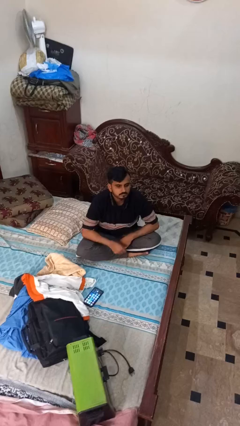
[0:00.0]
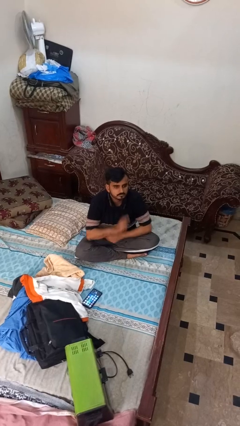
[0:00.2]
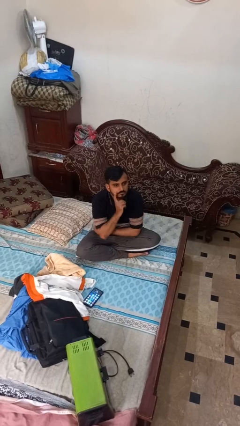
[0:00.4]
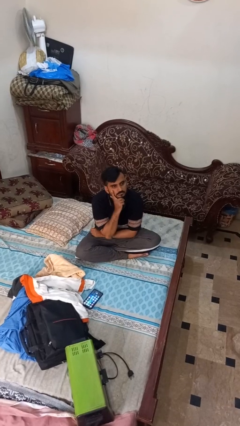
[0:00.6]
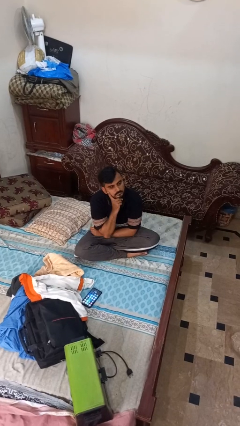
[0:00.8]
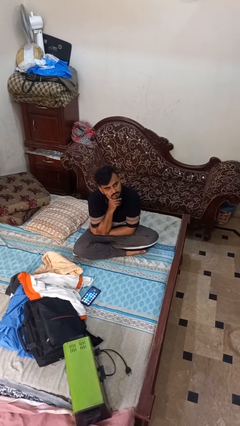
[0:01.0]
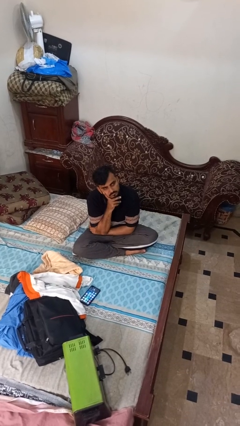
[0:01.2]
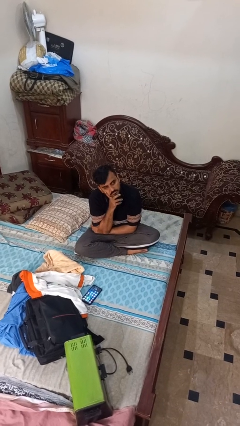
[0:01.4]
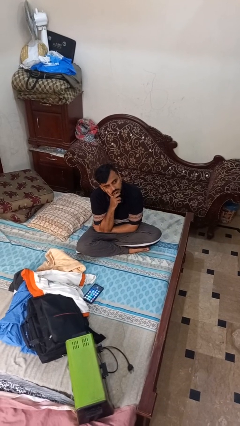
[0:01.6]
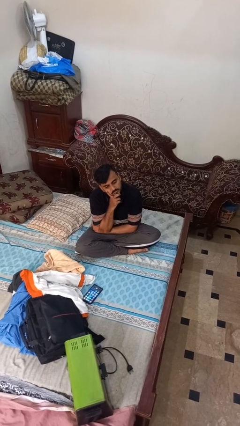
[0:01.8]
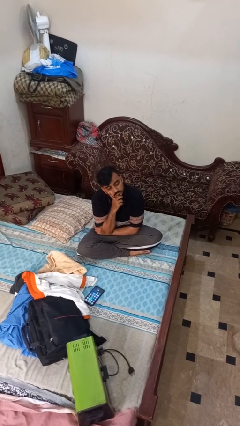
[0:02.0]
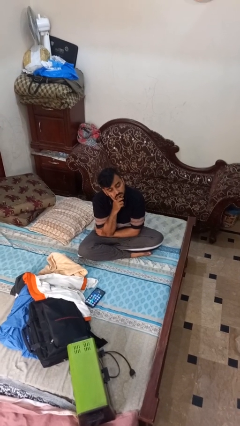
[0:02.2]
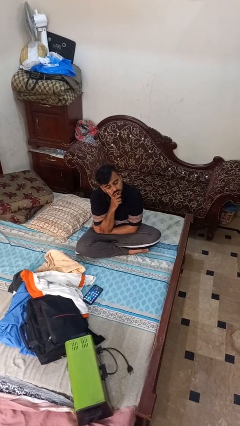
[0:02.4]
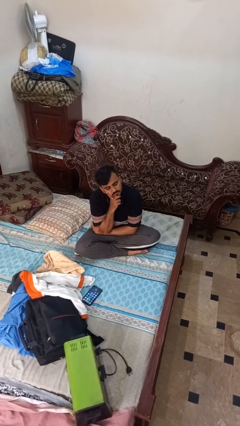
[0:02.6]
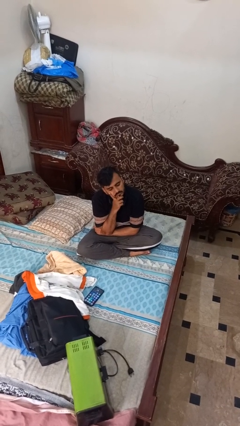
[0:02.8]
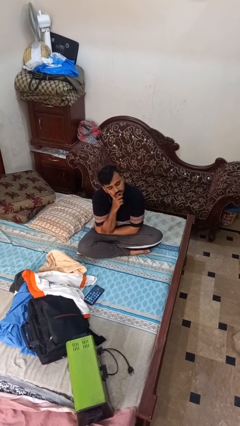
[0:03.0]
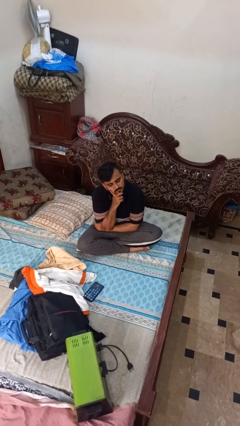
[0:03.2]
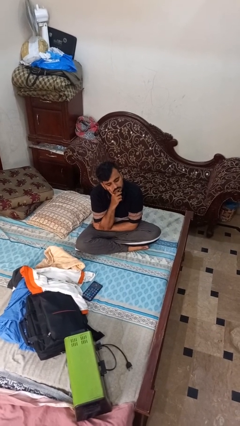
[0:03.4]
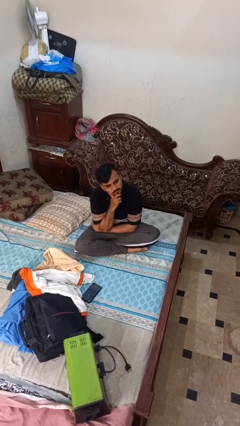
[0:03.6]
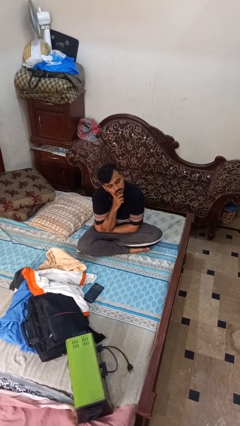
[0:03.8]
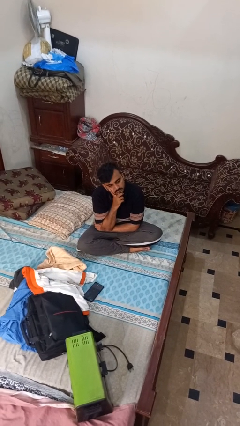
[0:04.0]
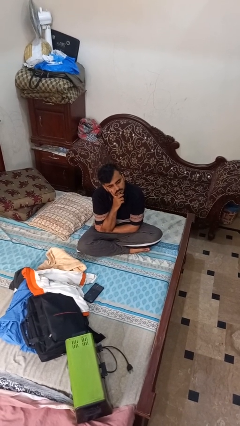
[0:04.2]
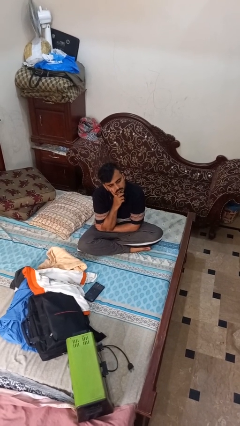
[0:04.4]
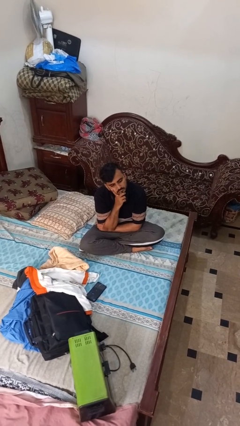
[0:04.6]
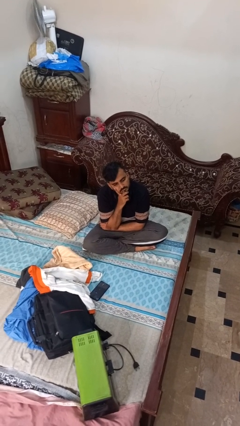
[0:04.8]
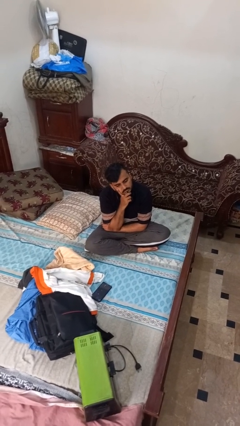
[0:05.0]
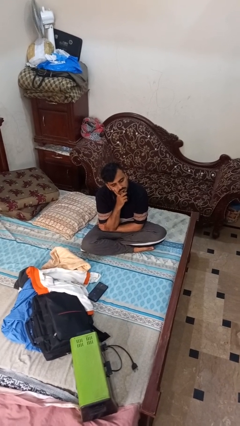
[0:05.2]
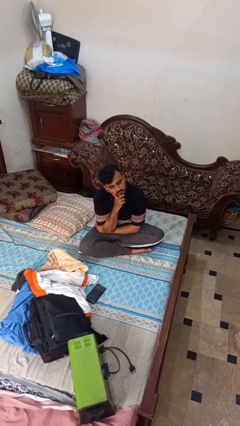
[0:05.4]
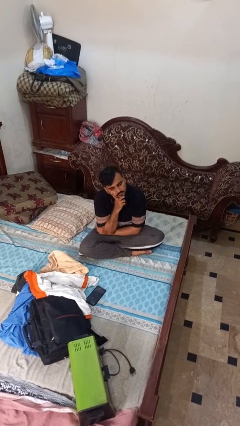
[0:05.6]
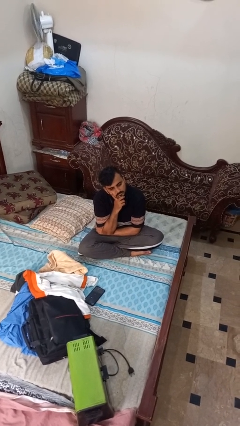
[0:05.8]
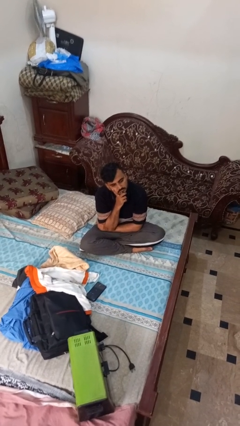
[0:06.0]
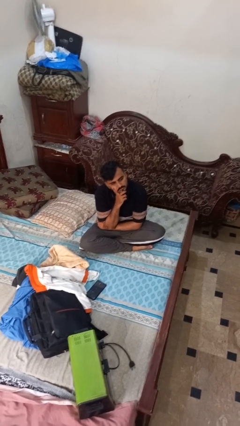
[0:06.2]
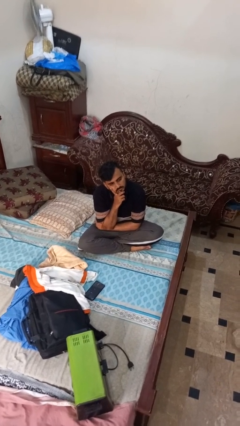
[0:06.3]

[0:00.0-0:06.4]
person strokes chin

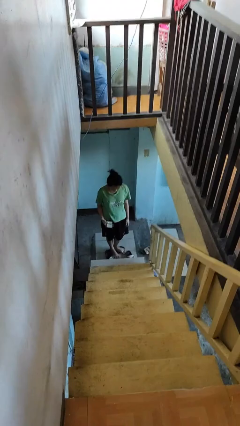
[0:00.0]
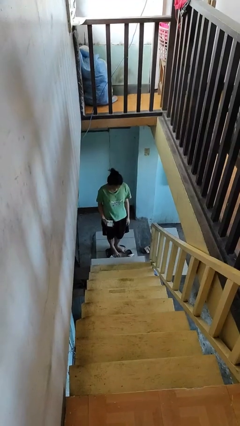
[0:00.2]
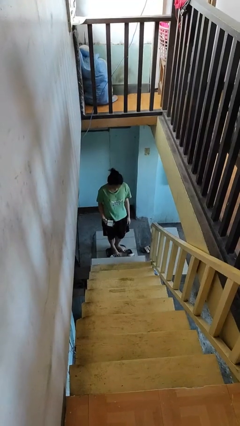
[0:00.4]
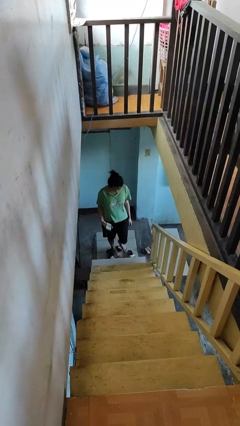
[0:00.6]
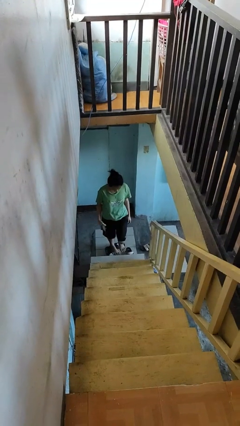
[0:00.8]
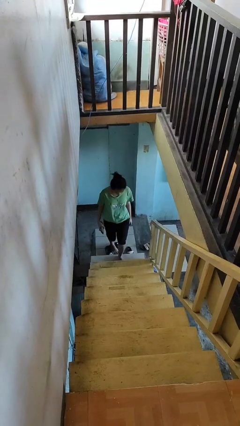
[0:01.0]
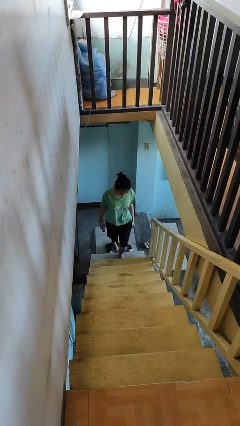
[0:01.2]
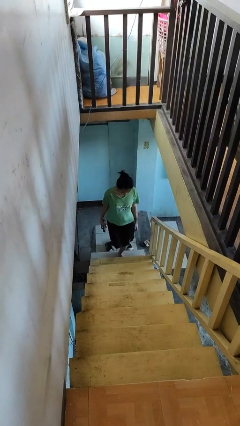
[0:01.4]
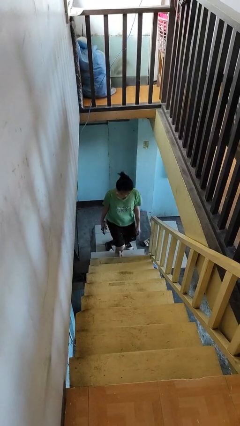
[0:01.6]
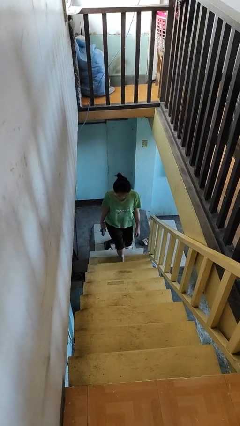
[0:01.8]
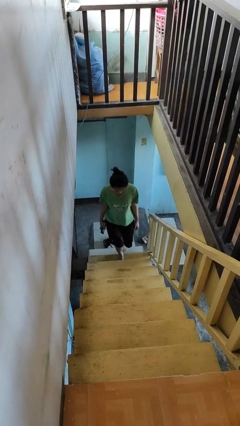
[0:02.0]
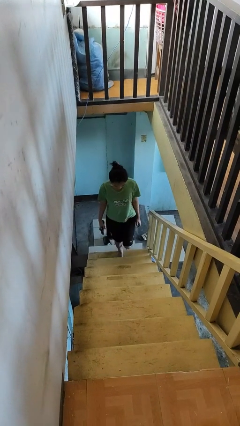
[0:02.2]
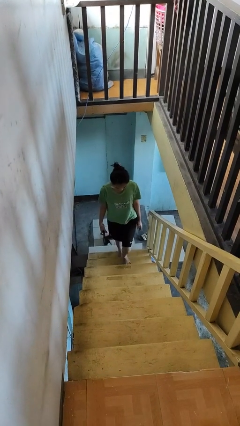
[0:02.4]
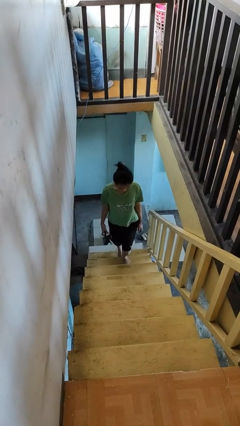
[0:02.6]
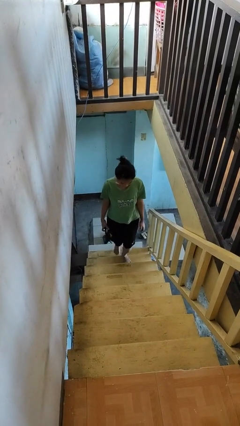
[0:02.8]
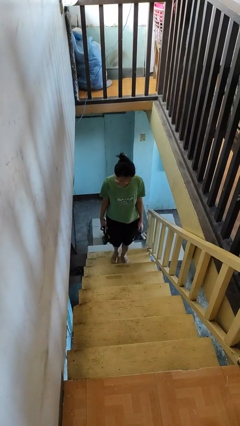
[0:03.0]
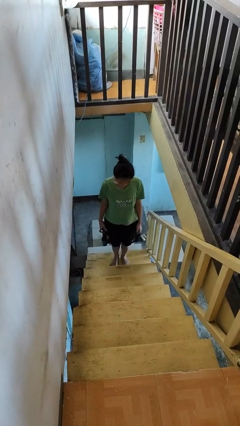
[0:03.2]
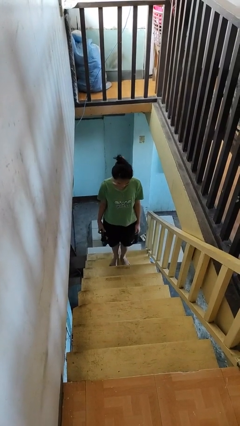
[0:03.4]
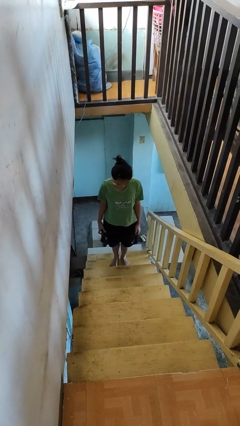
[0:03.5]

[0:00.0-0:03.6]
person climbs up stairs

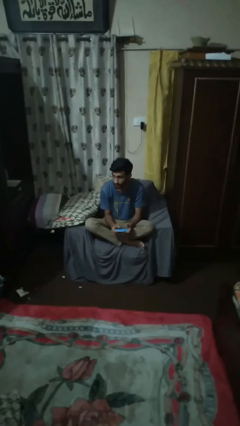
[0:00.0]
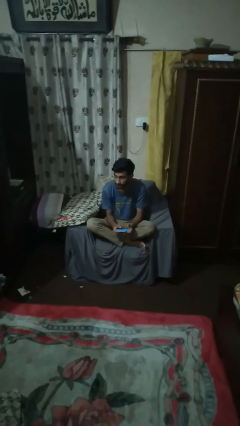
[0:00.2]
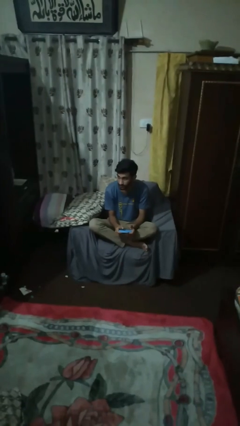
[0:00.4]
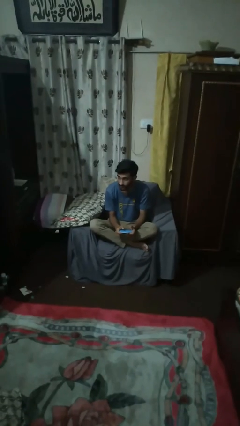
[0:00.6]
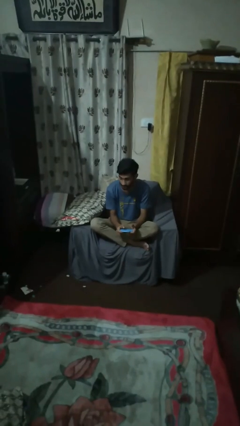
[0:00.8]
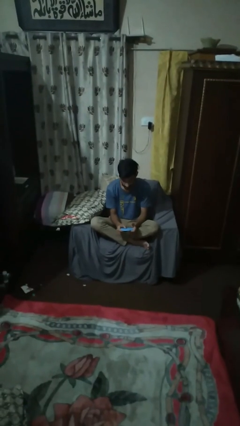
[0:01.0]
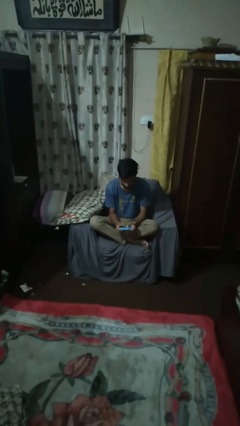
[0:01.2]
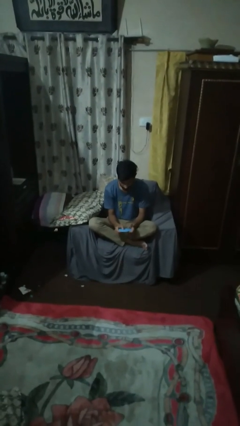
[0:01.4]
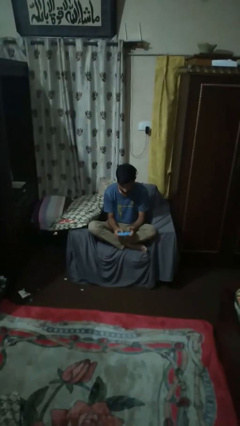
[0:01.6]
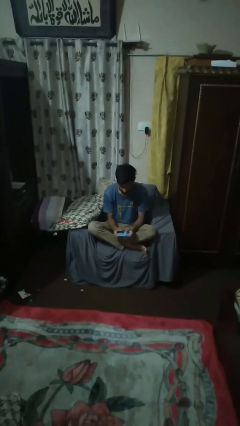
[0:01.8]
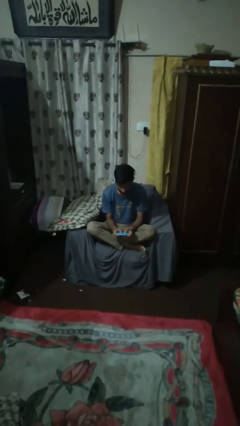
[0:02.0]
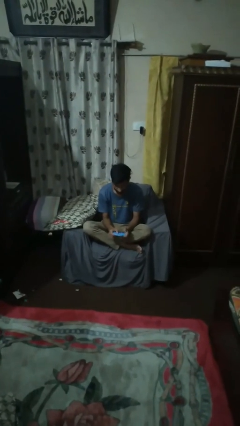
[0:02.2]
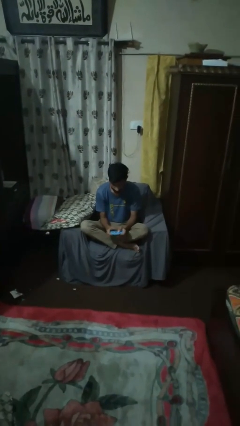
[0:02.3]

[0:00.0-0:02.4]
person interacts with handheld game

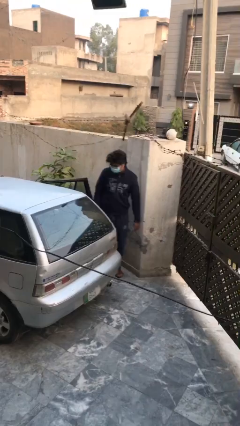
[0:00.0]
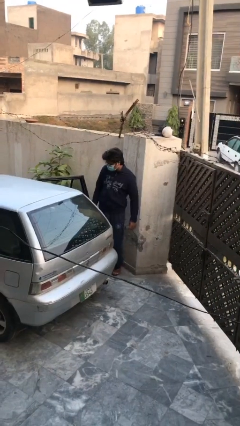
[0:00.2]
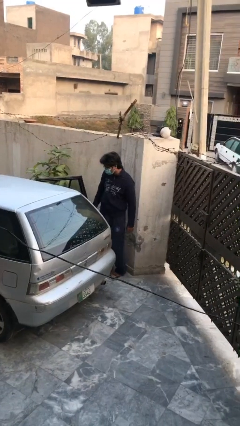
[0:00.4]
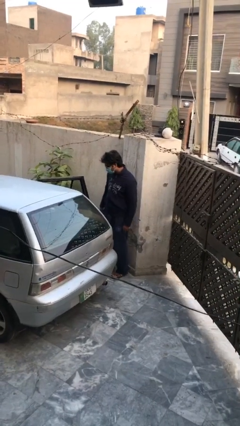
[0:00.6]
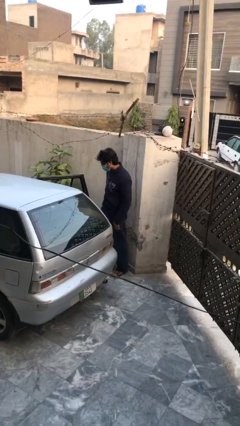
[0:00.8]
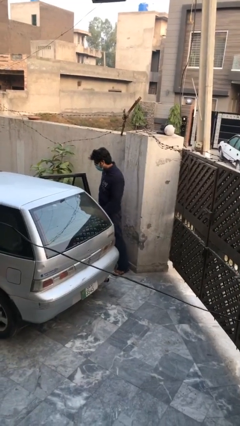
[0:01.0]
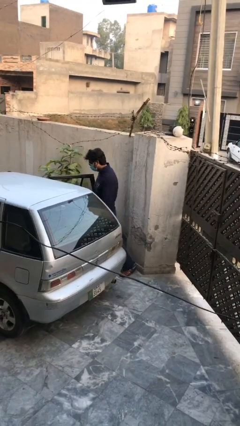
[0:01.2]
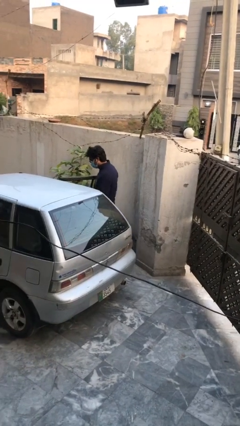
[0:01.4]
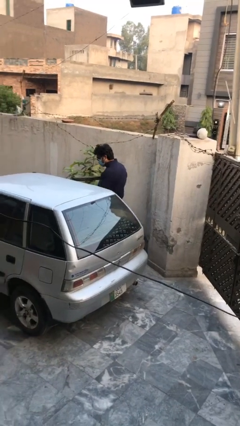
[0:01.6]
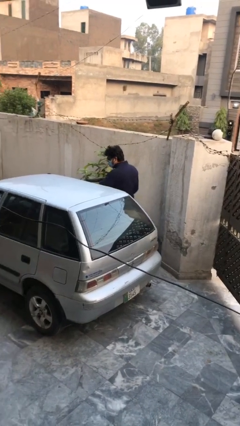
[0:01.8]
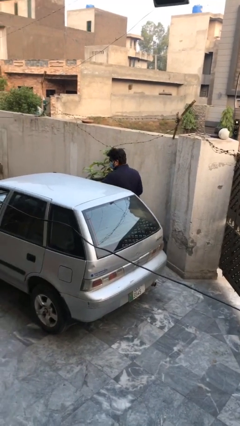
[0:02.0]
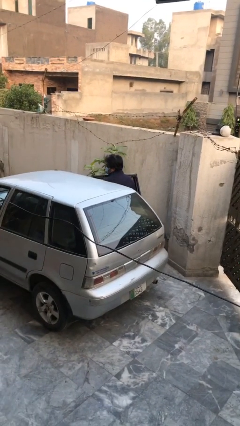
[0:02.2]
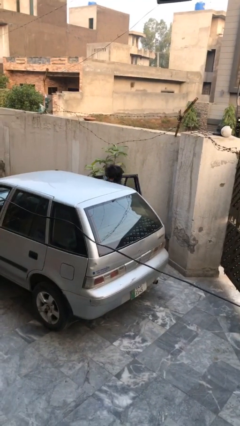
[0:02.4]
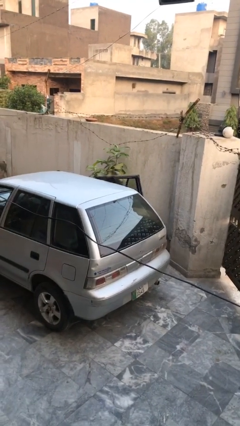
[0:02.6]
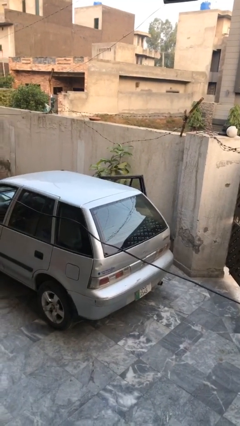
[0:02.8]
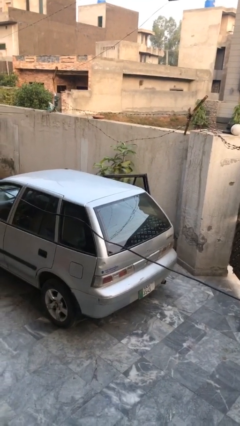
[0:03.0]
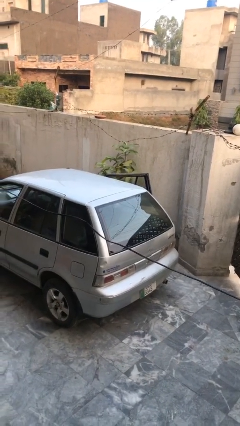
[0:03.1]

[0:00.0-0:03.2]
person enters car

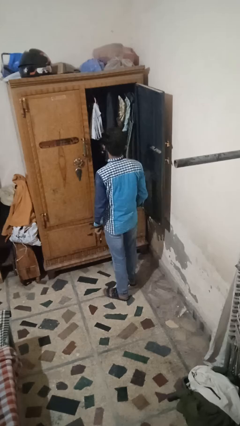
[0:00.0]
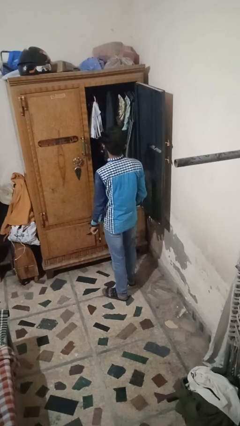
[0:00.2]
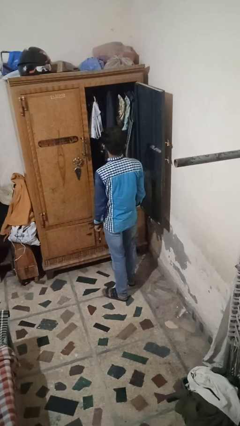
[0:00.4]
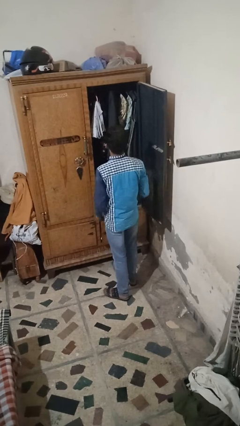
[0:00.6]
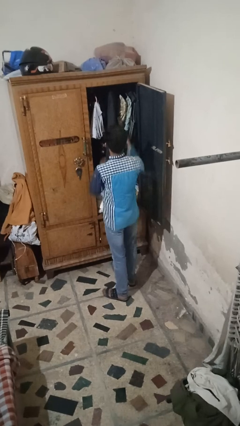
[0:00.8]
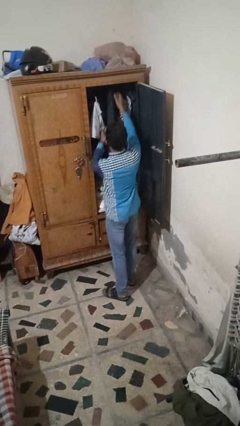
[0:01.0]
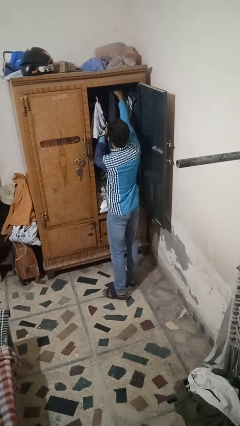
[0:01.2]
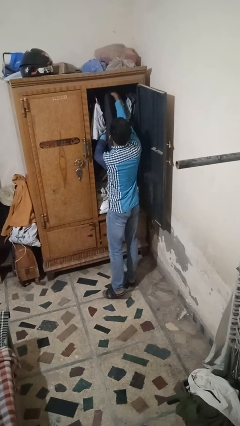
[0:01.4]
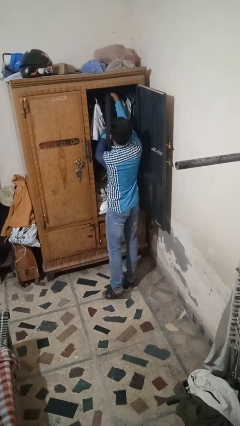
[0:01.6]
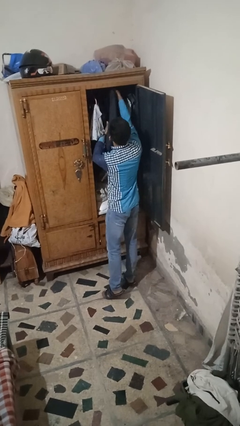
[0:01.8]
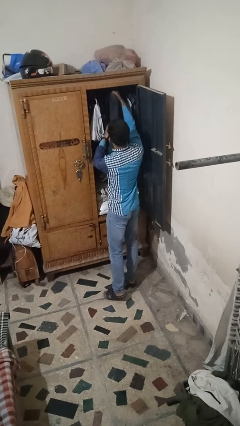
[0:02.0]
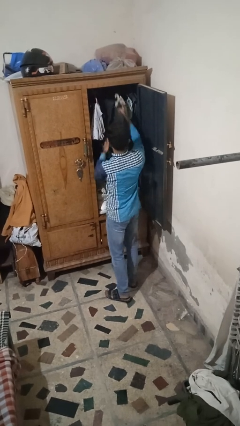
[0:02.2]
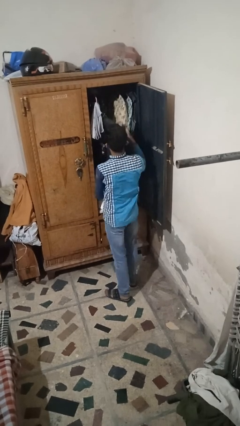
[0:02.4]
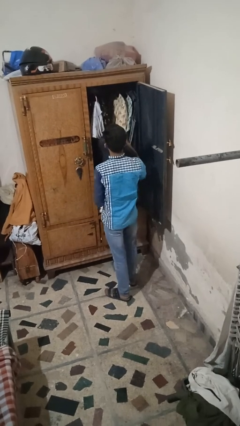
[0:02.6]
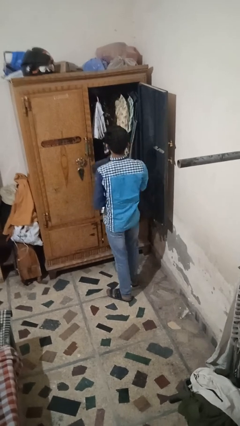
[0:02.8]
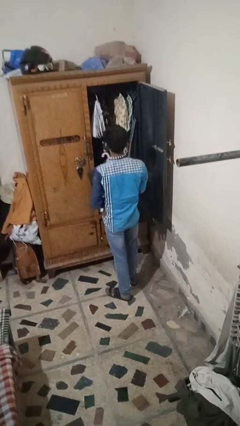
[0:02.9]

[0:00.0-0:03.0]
person takes clothes from closet
